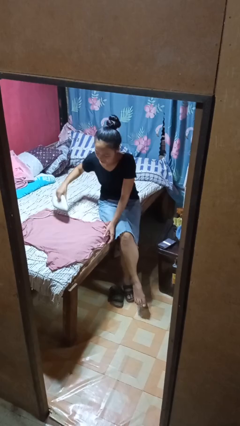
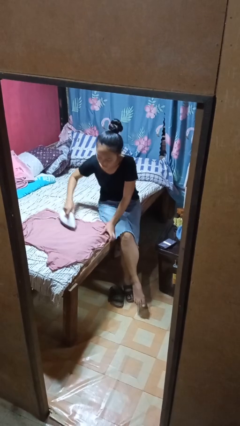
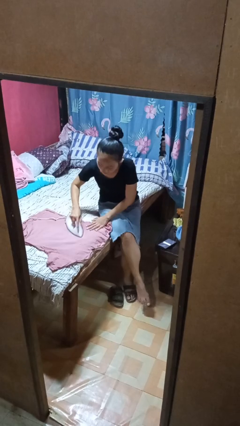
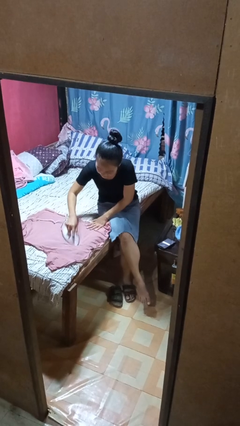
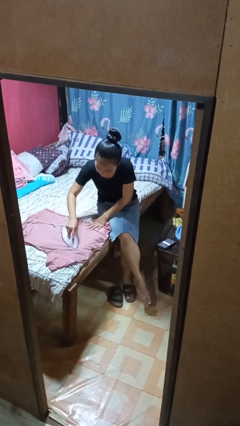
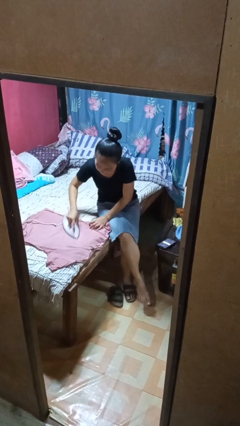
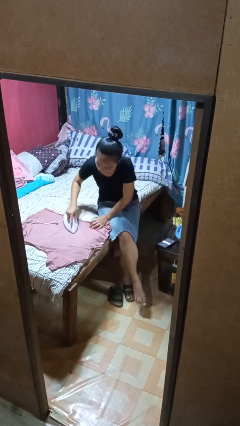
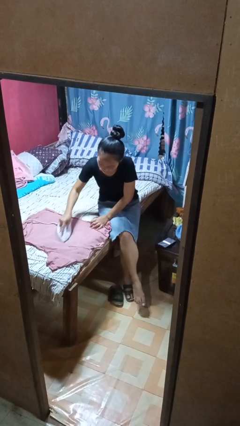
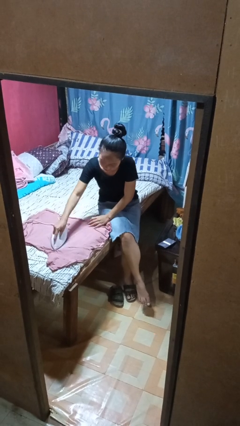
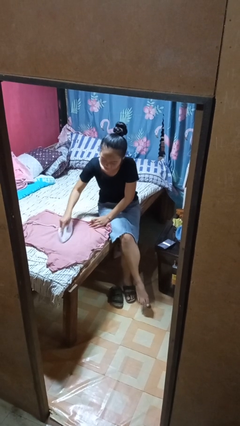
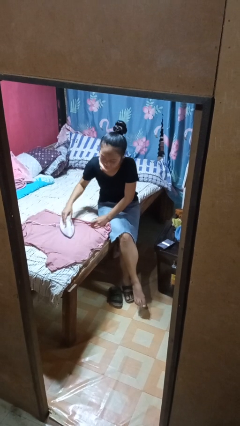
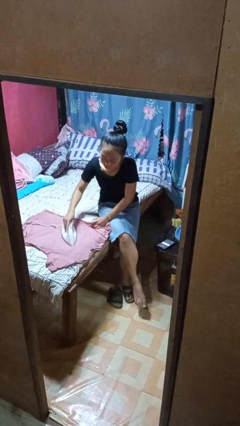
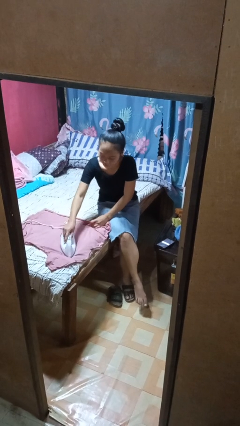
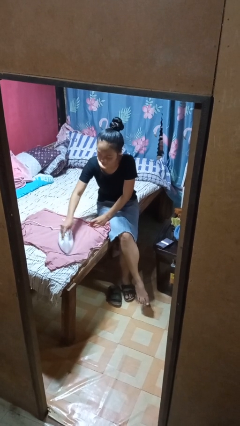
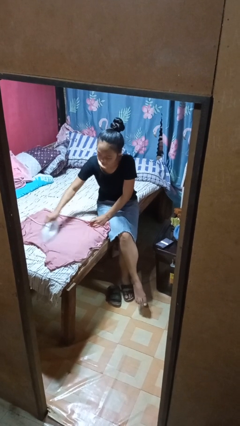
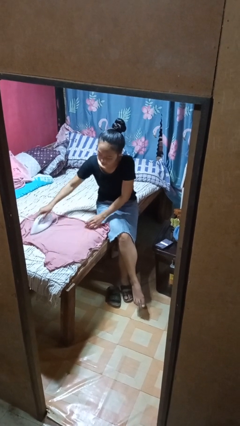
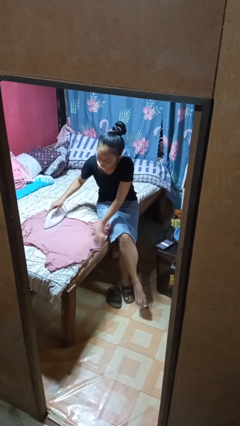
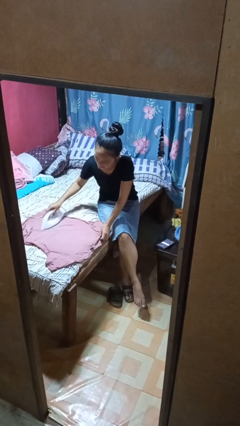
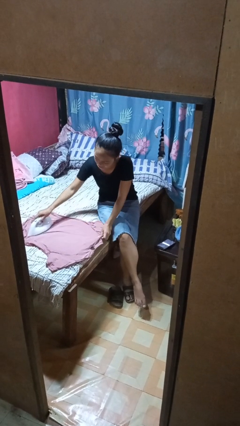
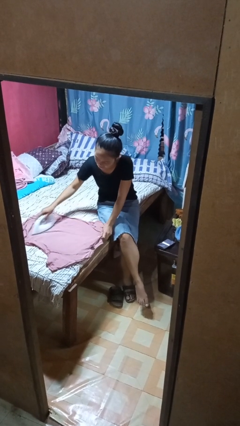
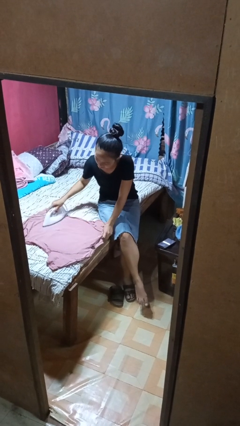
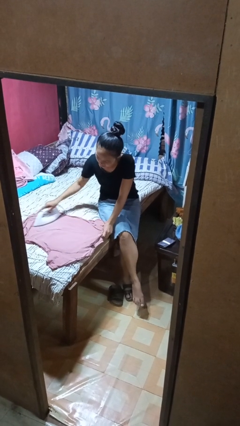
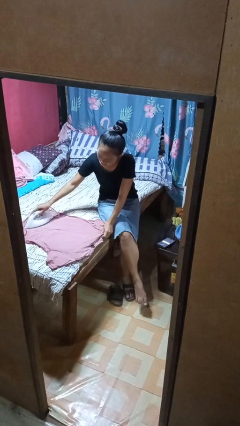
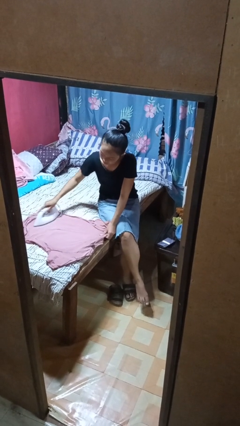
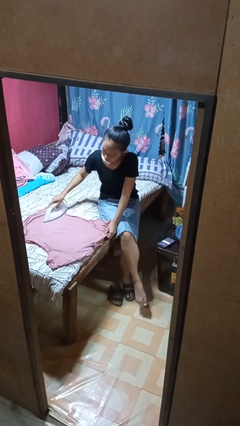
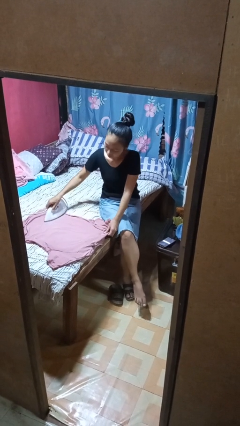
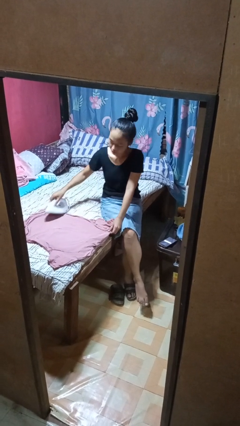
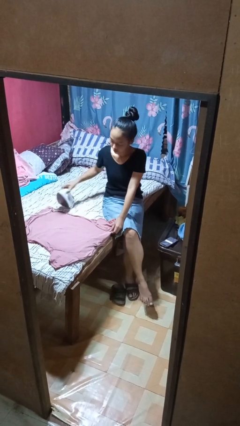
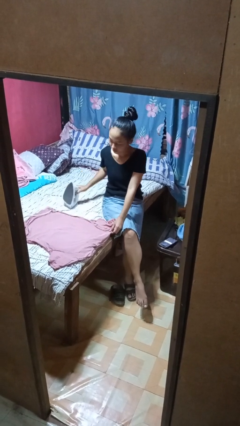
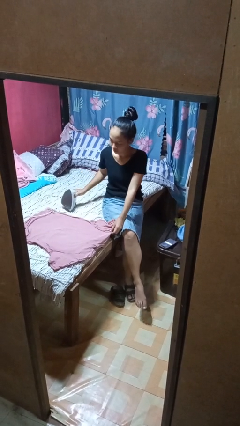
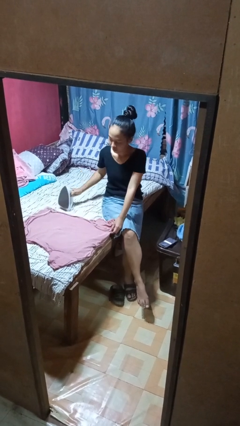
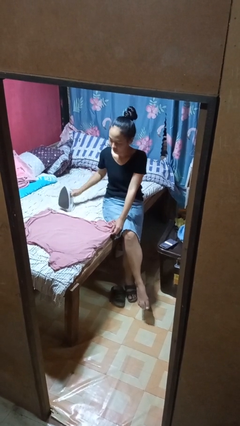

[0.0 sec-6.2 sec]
person irons clothes

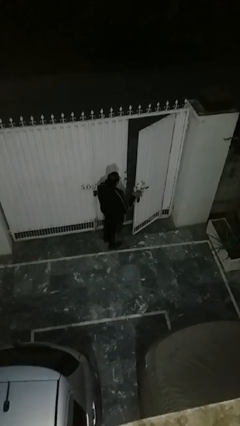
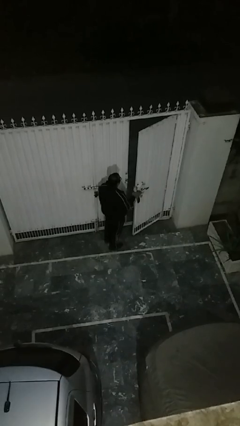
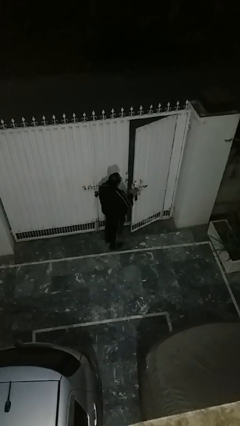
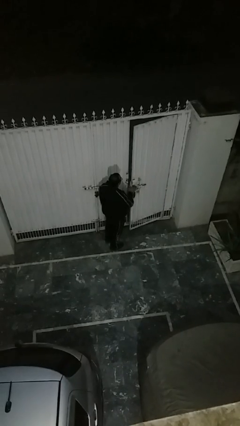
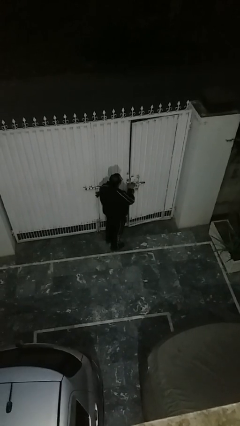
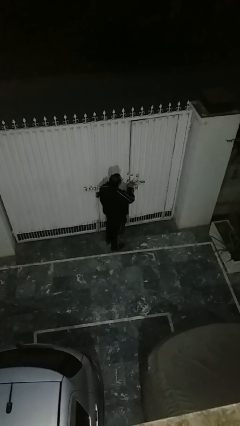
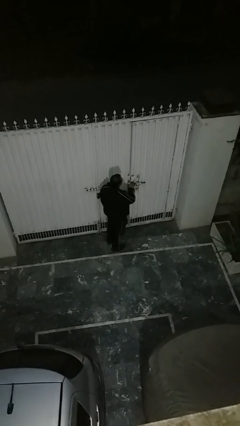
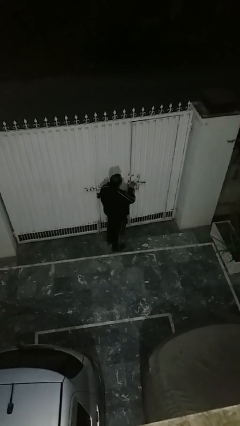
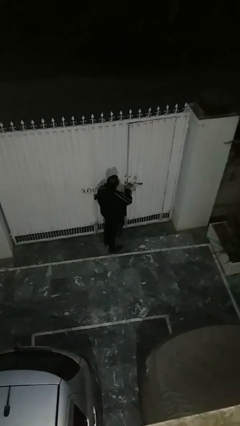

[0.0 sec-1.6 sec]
person closes facility door

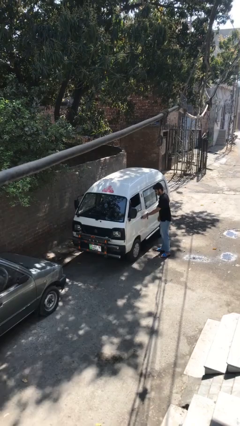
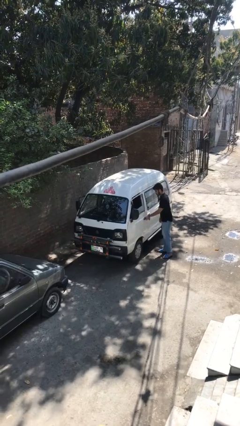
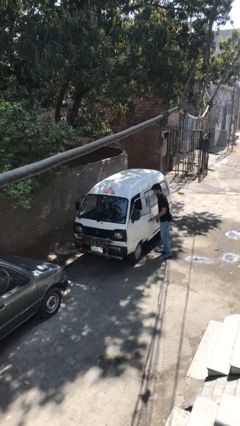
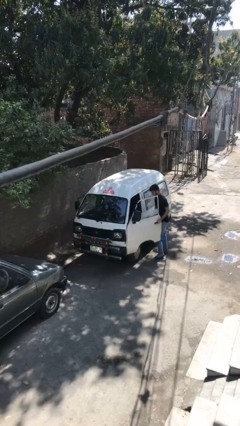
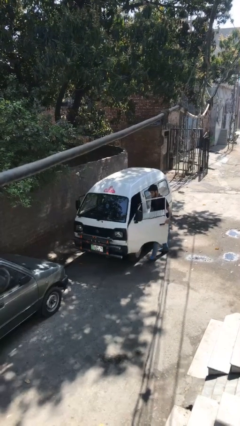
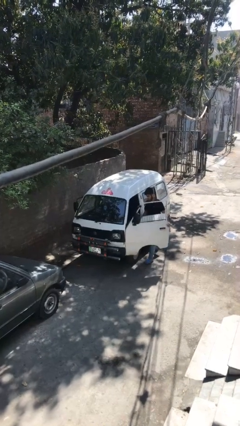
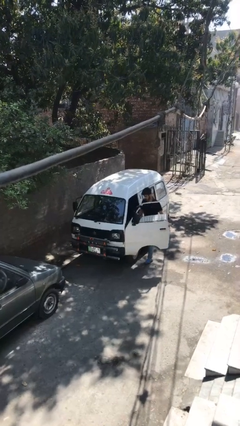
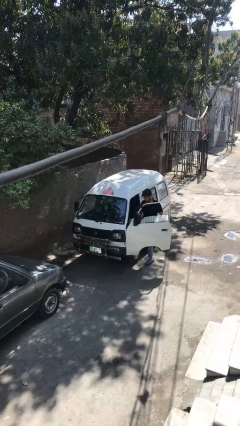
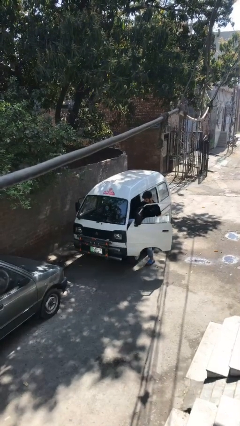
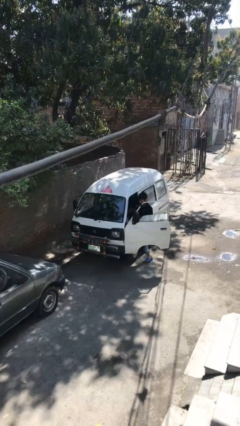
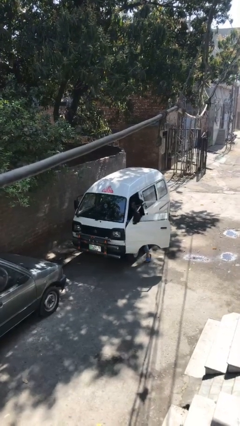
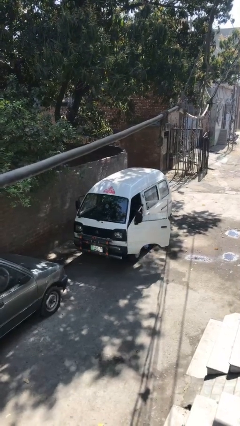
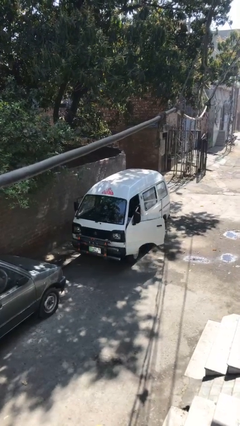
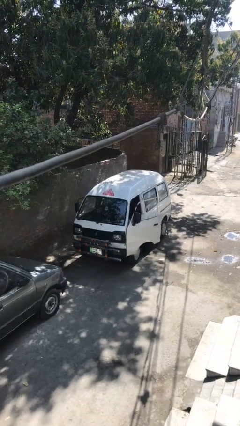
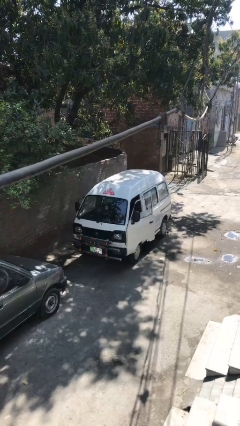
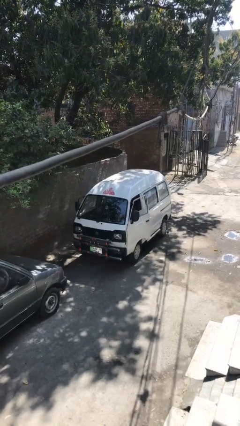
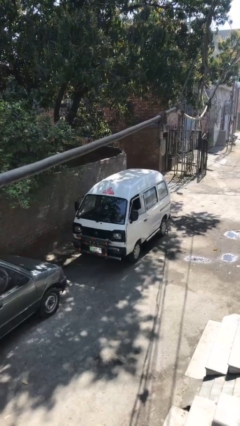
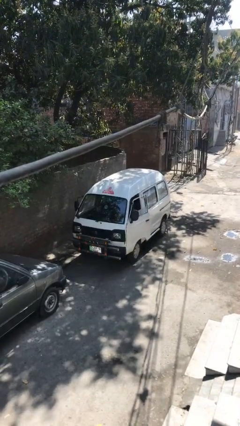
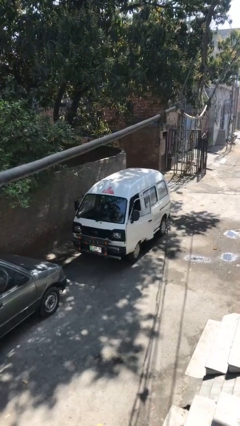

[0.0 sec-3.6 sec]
car picks up person

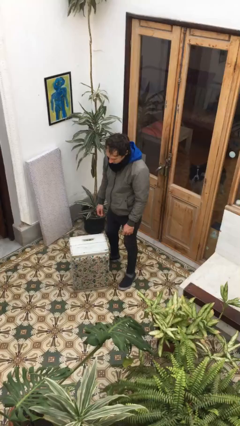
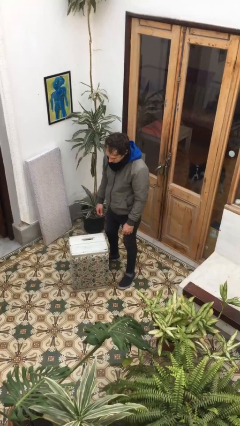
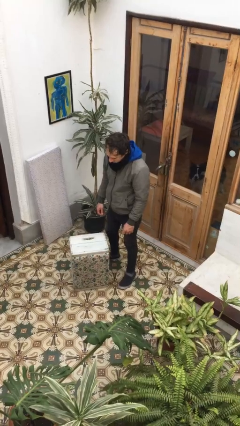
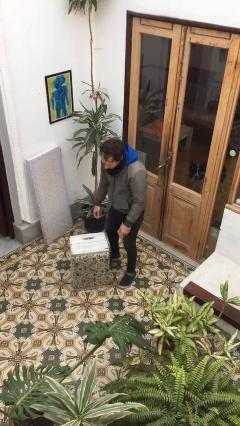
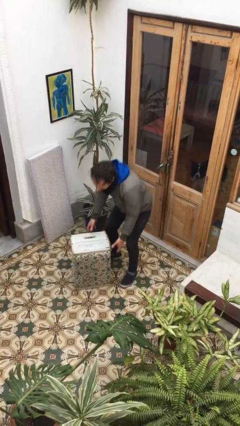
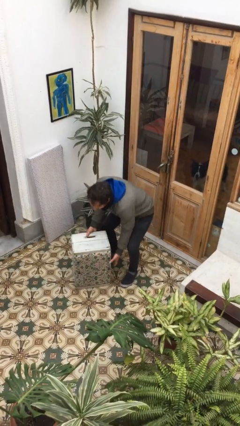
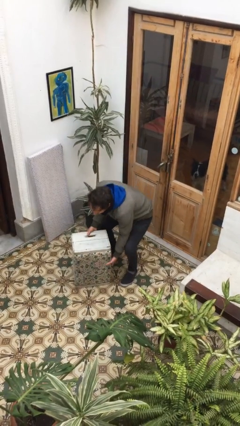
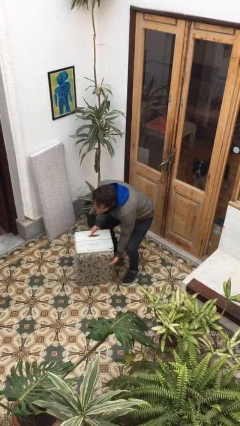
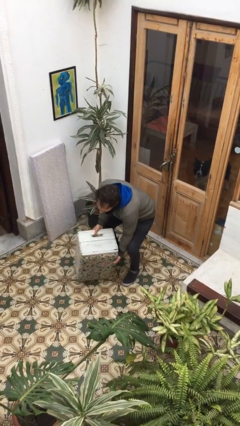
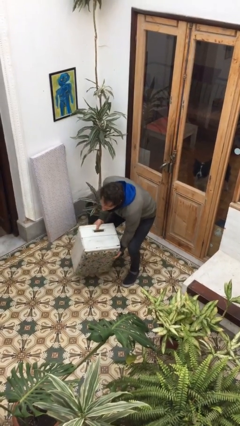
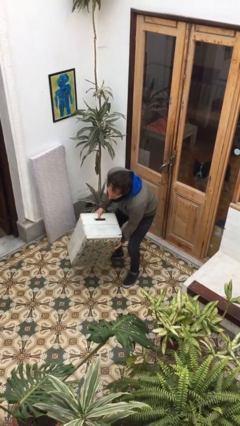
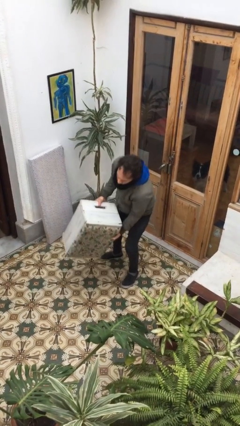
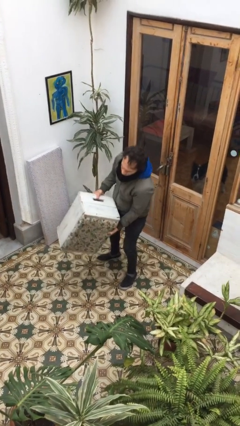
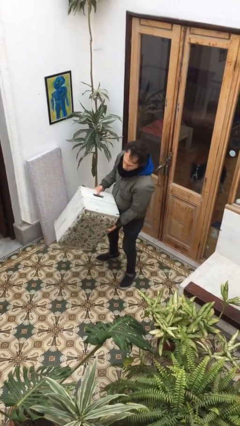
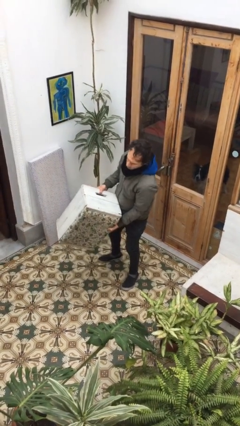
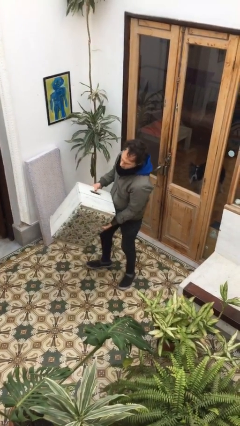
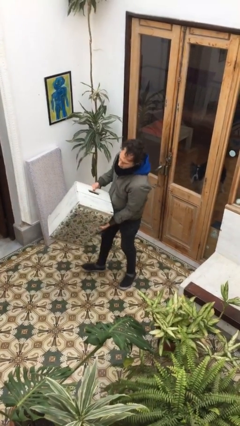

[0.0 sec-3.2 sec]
person picks up object from floor

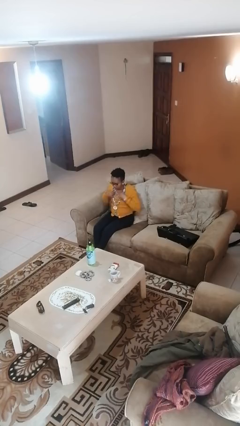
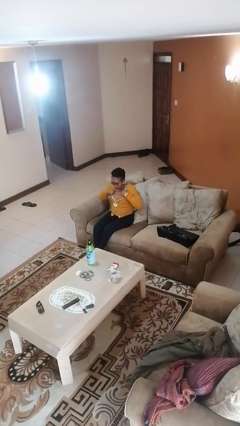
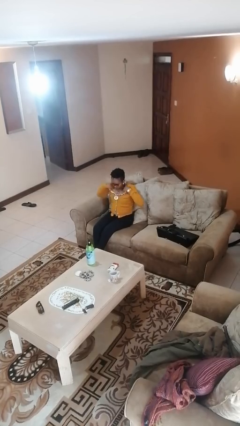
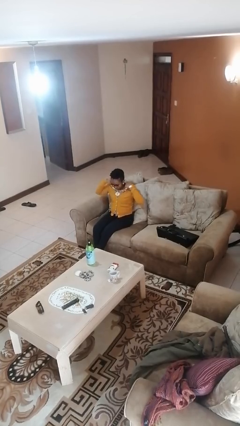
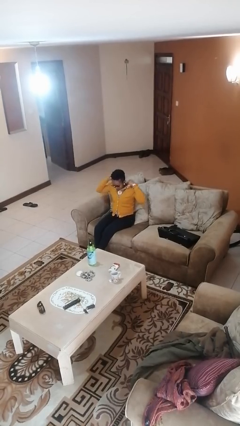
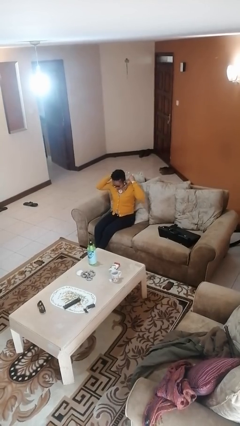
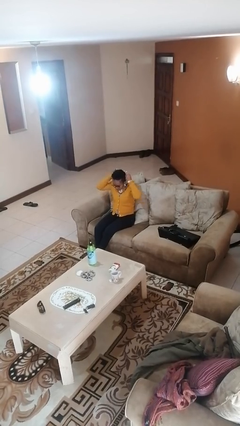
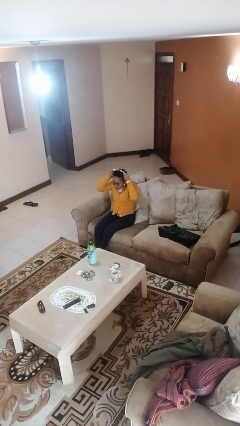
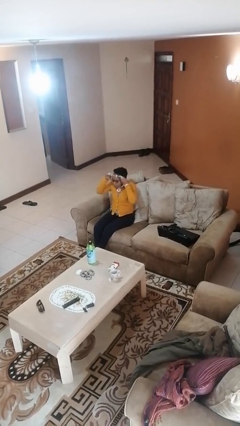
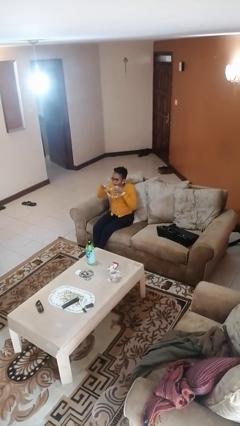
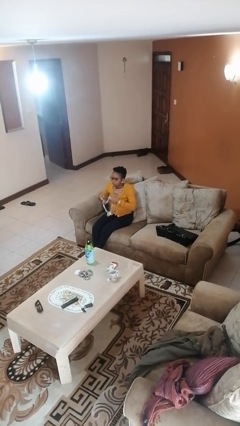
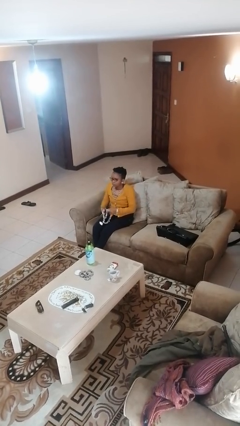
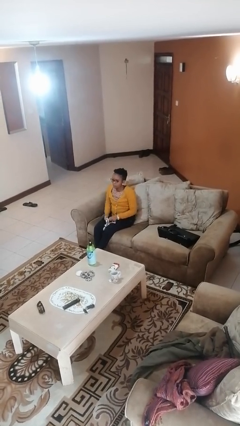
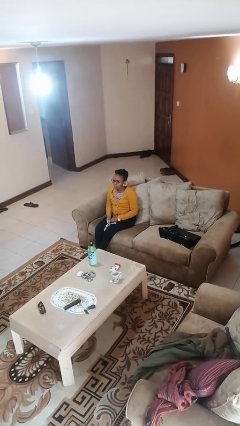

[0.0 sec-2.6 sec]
person takes off necklace

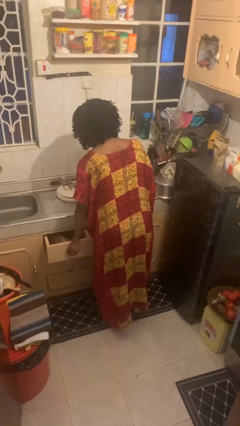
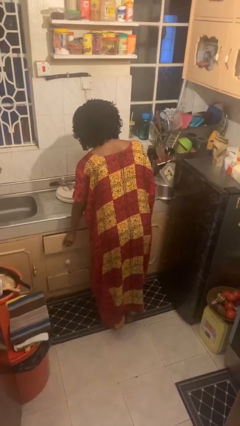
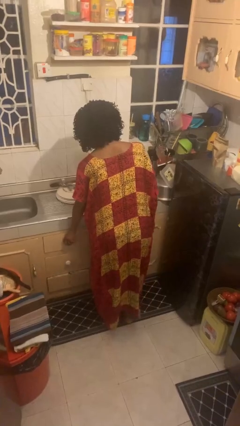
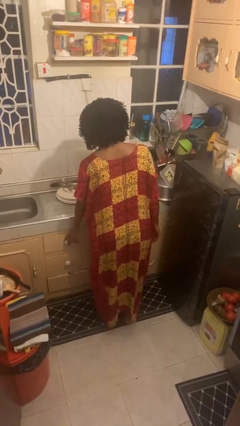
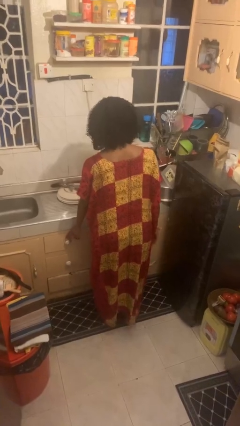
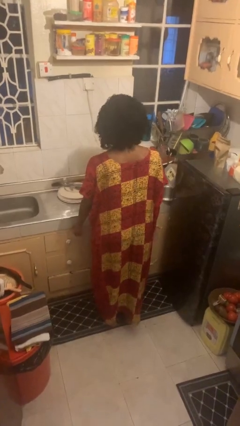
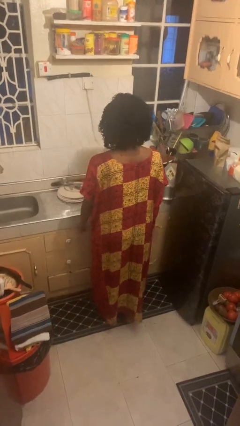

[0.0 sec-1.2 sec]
person closes kitchen drawer
